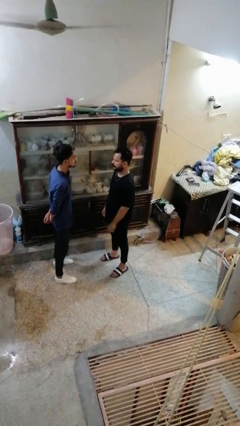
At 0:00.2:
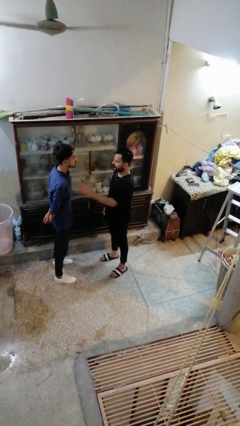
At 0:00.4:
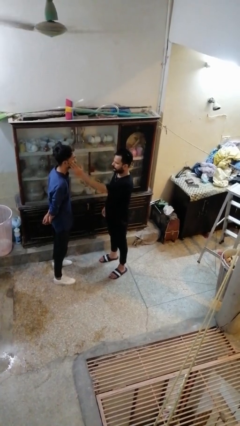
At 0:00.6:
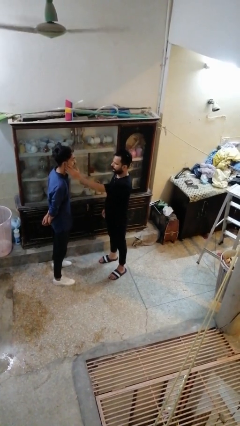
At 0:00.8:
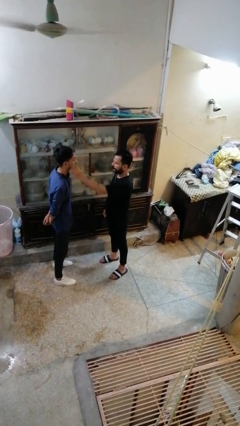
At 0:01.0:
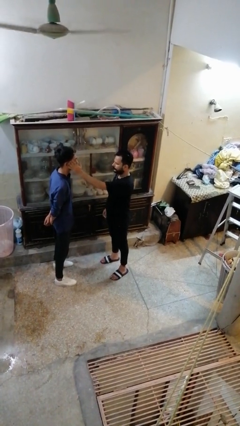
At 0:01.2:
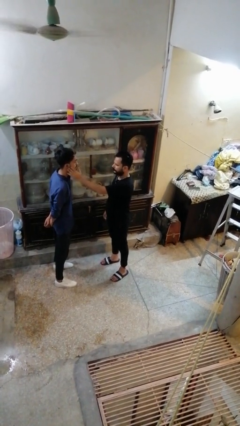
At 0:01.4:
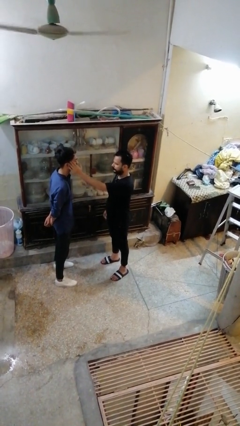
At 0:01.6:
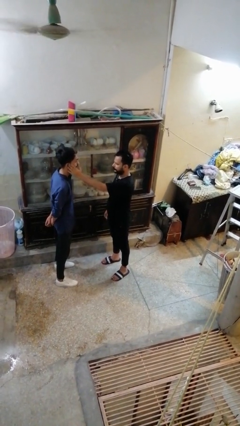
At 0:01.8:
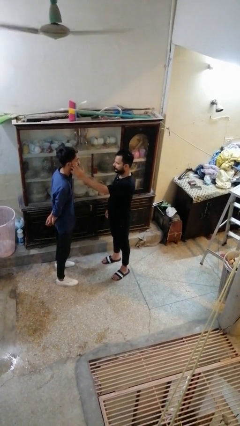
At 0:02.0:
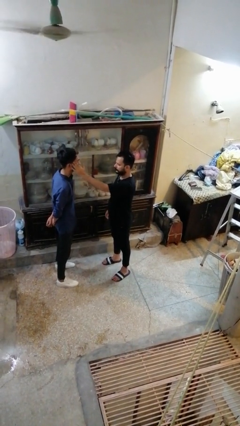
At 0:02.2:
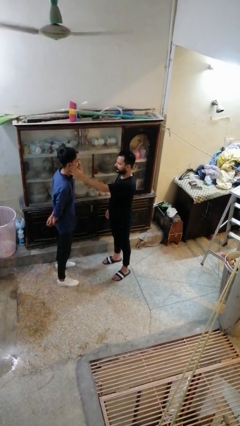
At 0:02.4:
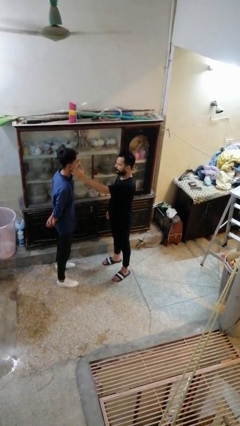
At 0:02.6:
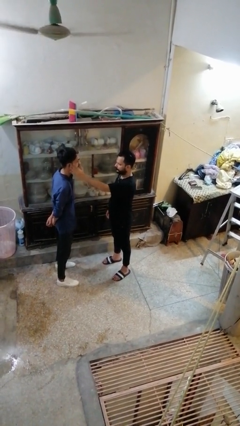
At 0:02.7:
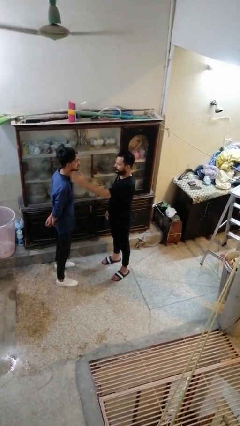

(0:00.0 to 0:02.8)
person touches face of person

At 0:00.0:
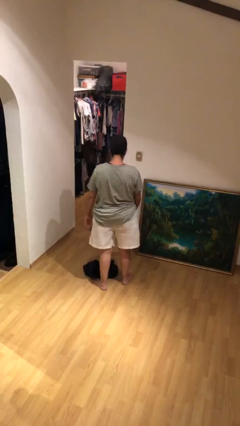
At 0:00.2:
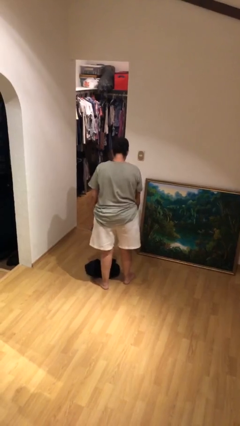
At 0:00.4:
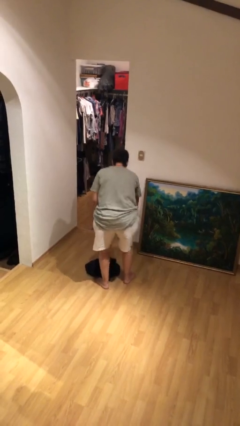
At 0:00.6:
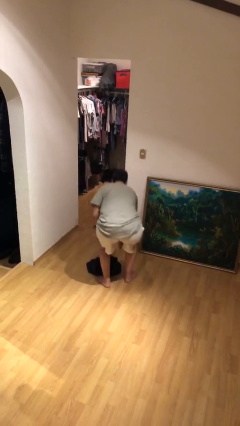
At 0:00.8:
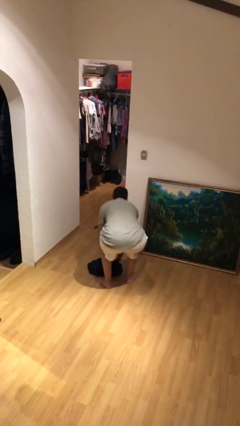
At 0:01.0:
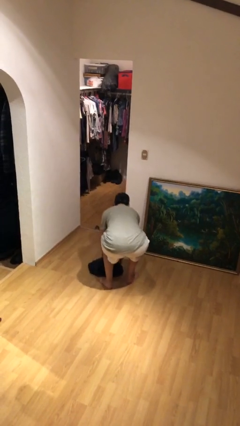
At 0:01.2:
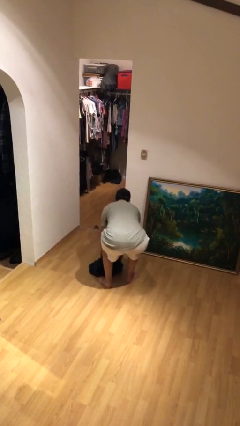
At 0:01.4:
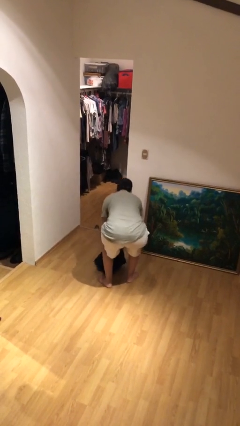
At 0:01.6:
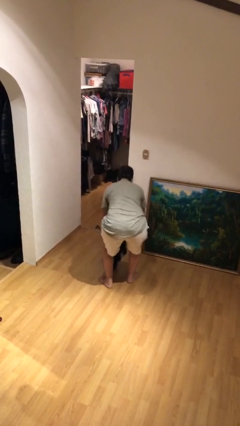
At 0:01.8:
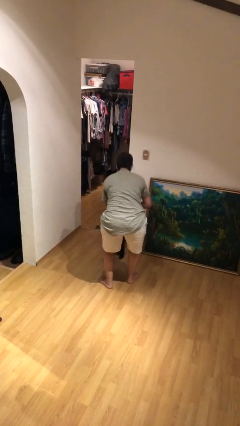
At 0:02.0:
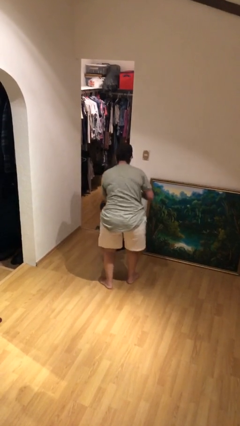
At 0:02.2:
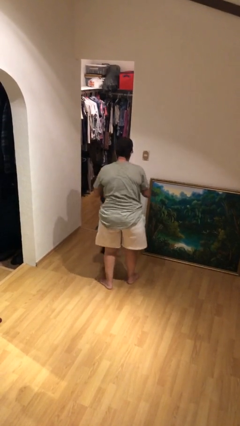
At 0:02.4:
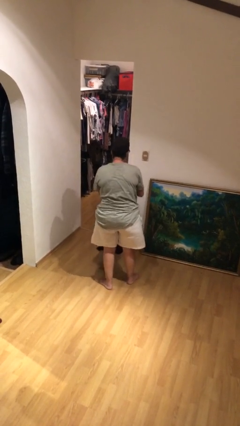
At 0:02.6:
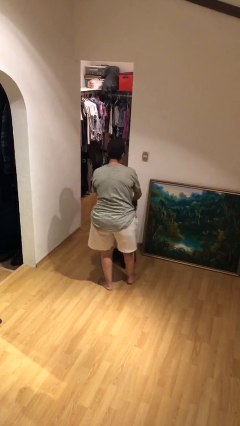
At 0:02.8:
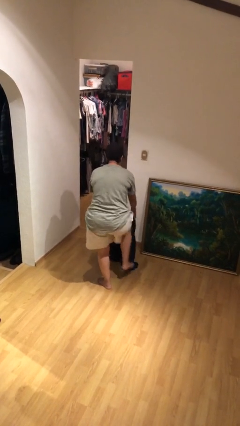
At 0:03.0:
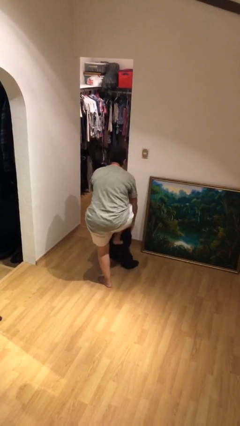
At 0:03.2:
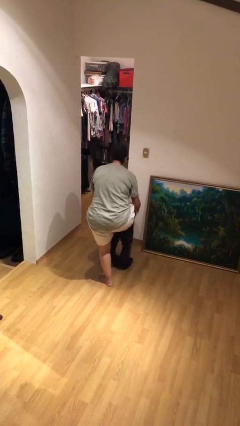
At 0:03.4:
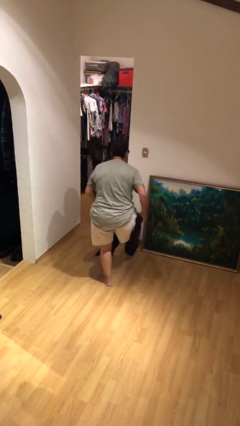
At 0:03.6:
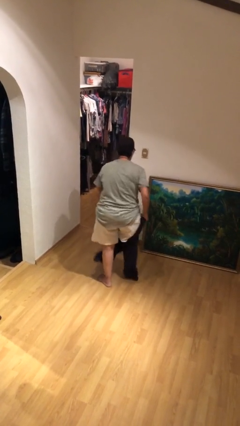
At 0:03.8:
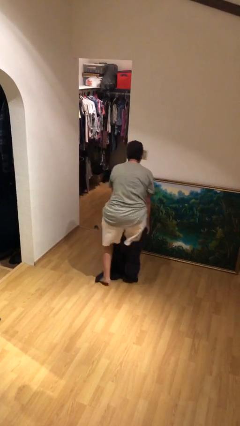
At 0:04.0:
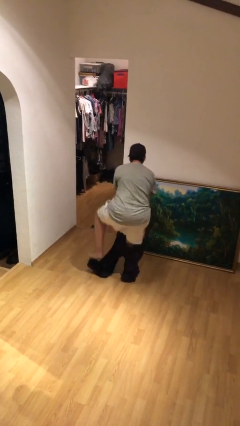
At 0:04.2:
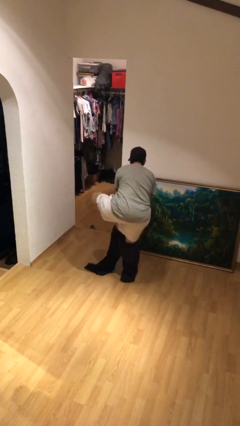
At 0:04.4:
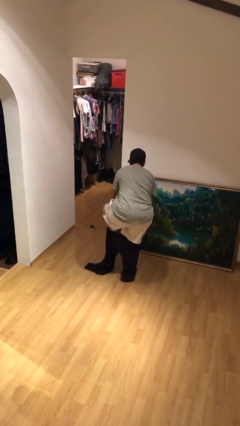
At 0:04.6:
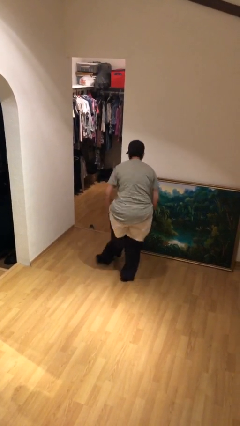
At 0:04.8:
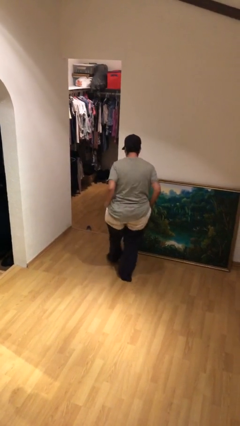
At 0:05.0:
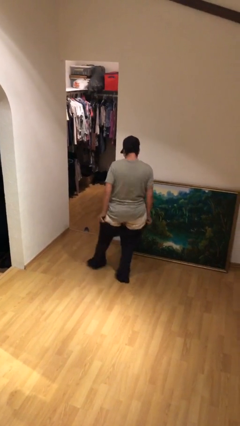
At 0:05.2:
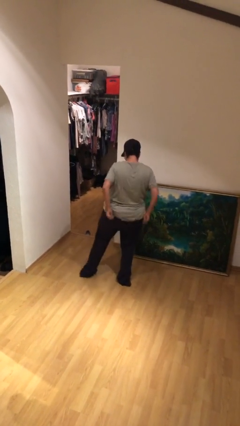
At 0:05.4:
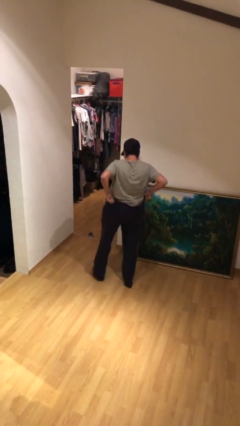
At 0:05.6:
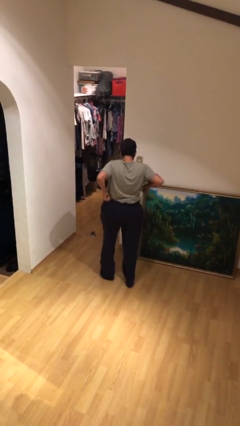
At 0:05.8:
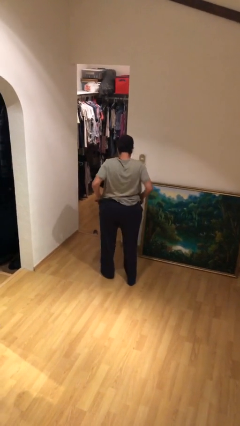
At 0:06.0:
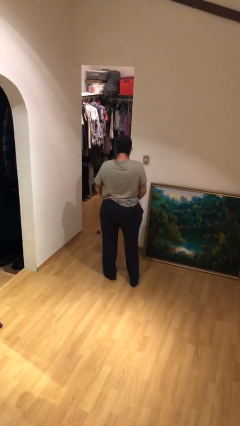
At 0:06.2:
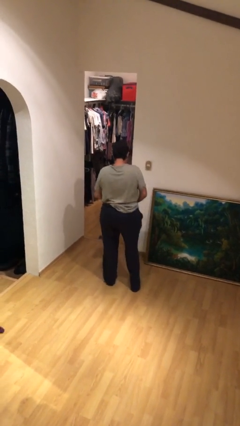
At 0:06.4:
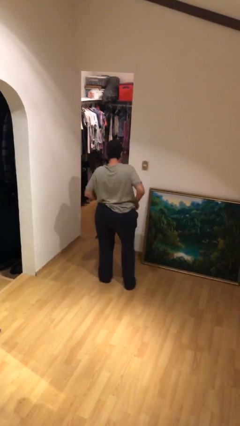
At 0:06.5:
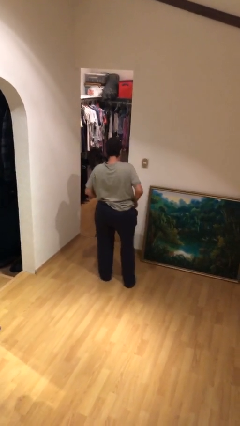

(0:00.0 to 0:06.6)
person puts on pants

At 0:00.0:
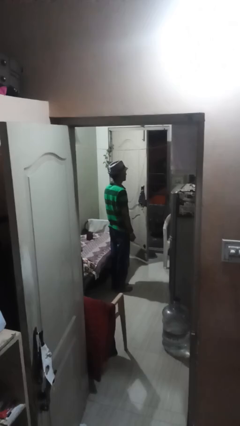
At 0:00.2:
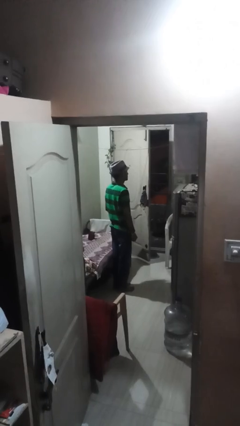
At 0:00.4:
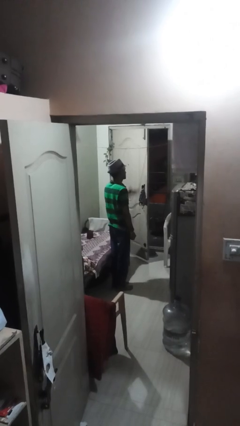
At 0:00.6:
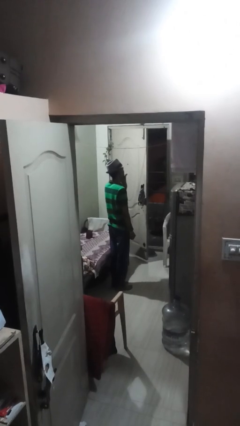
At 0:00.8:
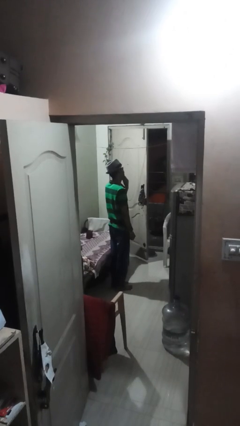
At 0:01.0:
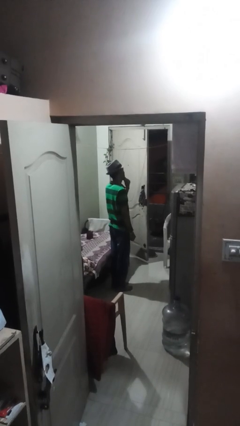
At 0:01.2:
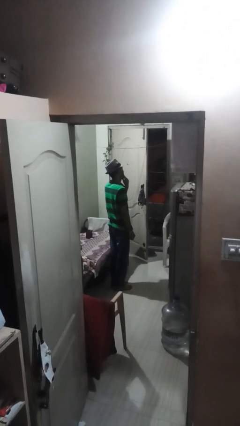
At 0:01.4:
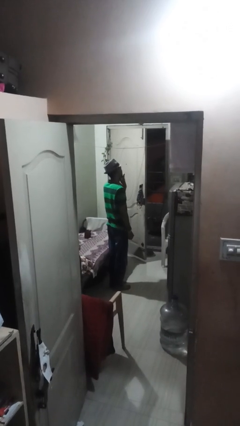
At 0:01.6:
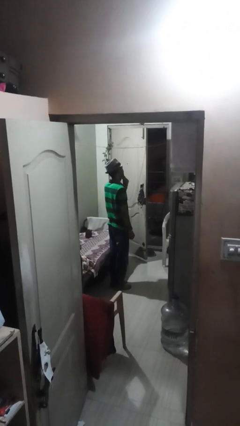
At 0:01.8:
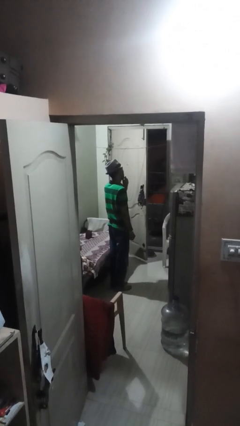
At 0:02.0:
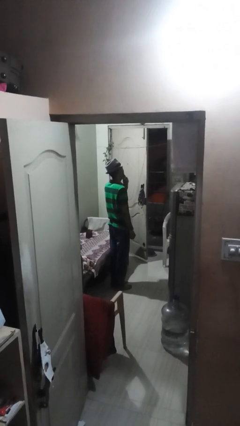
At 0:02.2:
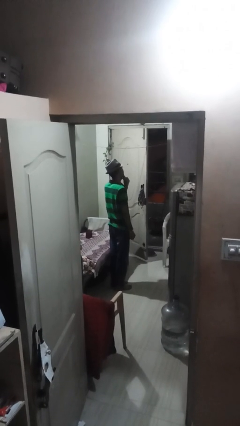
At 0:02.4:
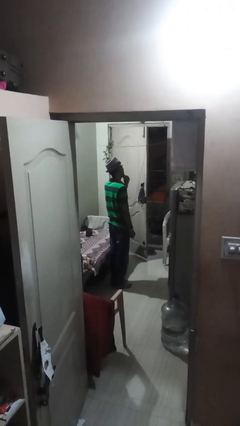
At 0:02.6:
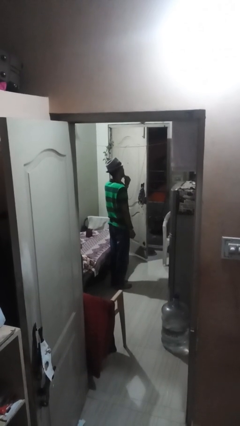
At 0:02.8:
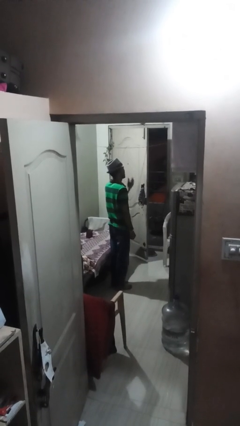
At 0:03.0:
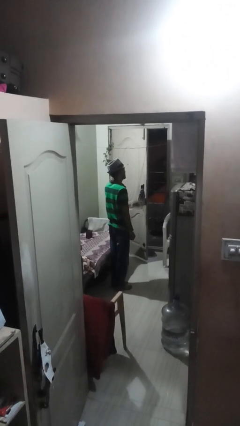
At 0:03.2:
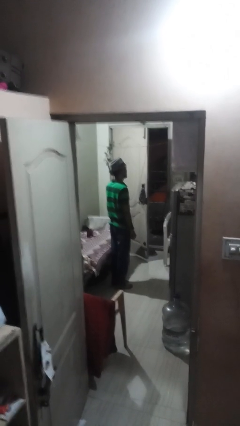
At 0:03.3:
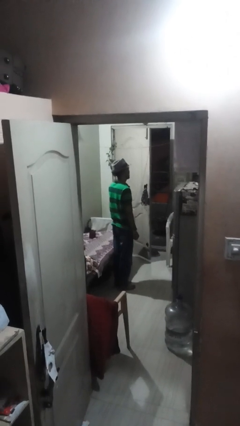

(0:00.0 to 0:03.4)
person strokes chin

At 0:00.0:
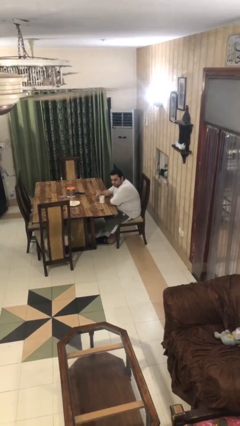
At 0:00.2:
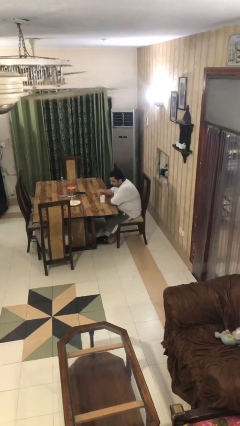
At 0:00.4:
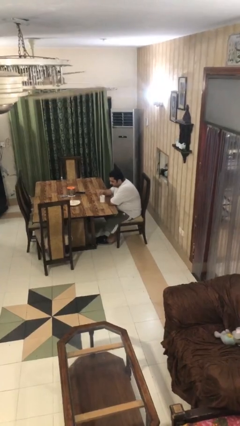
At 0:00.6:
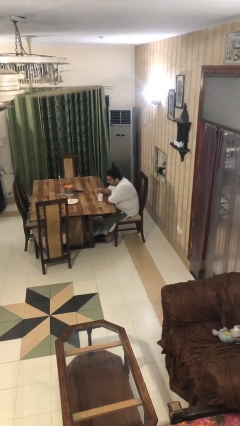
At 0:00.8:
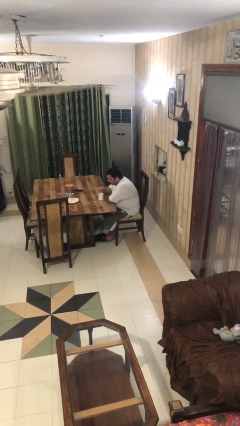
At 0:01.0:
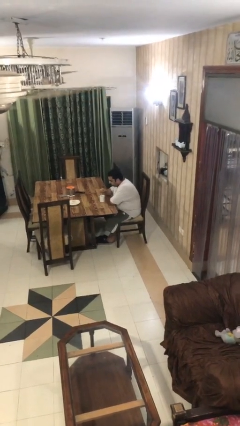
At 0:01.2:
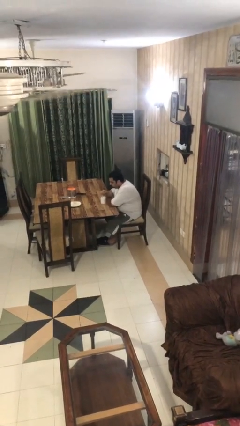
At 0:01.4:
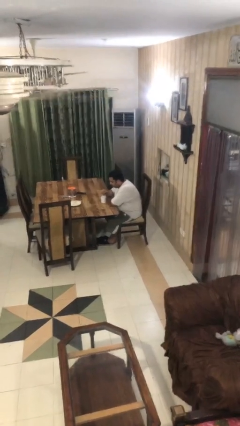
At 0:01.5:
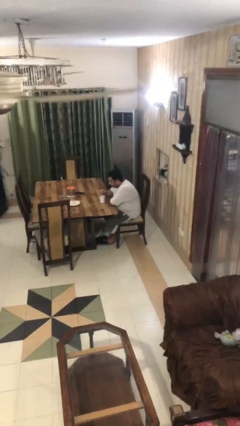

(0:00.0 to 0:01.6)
person stirs mug

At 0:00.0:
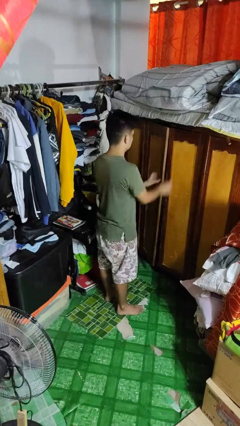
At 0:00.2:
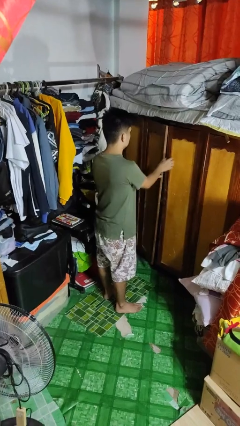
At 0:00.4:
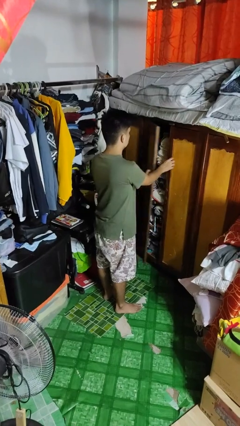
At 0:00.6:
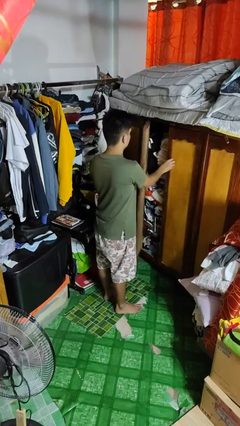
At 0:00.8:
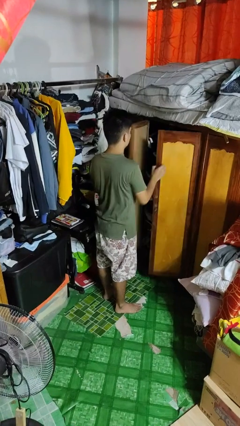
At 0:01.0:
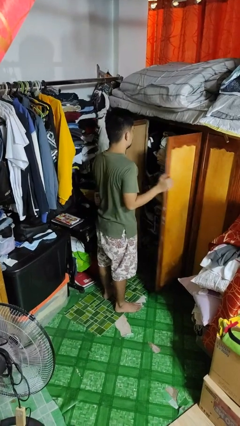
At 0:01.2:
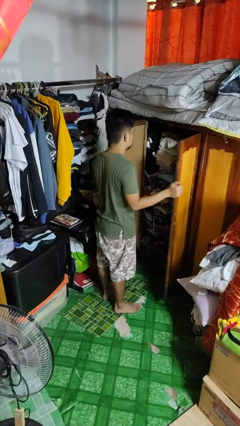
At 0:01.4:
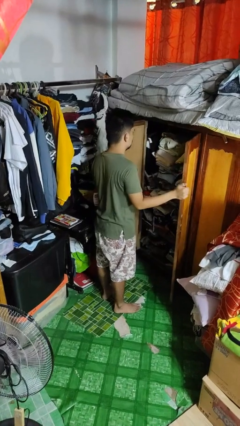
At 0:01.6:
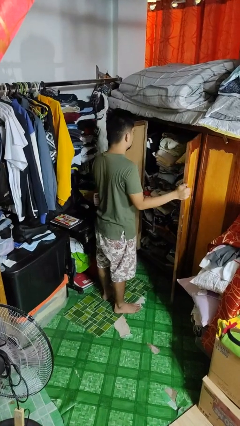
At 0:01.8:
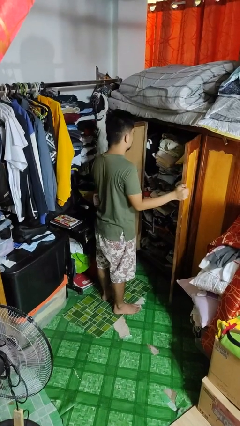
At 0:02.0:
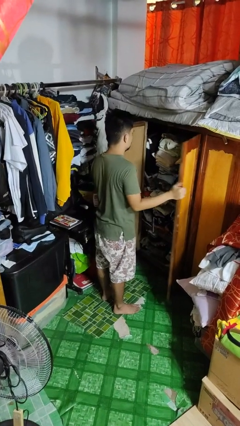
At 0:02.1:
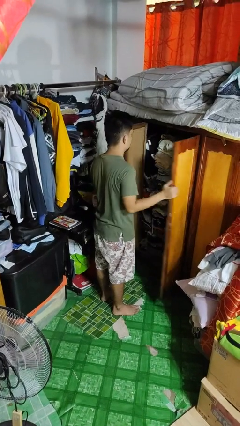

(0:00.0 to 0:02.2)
person opens closet door

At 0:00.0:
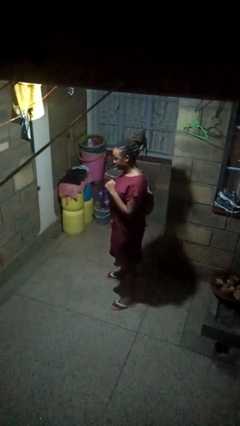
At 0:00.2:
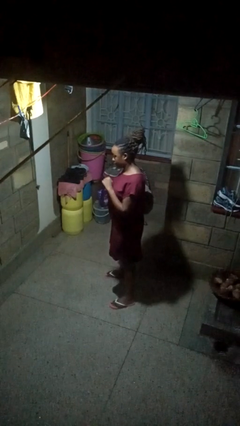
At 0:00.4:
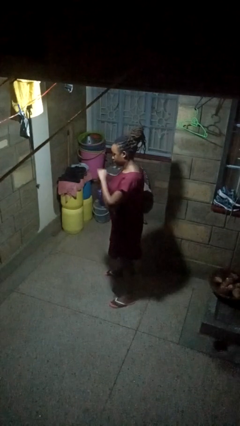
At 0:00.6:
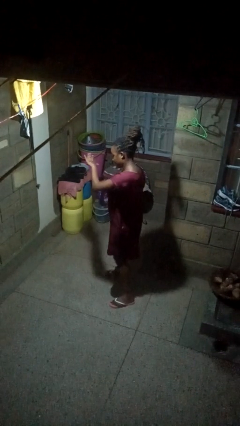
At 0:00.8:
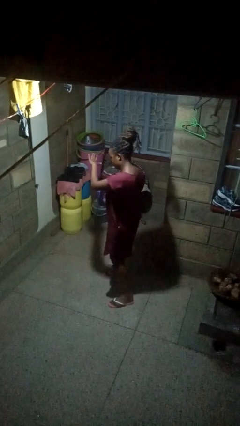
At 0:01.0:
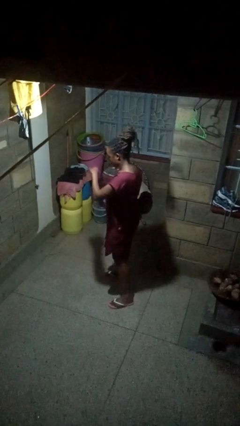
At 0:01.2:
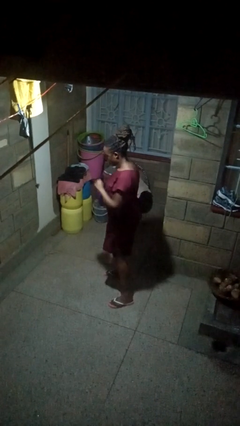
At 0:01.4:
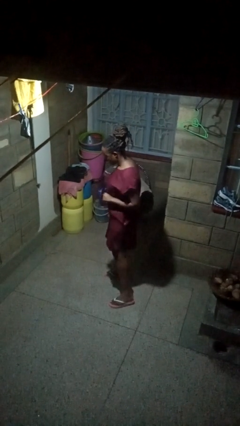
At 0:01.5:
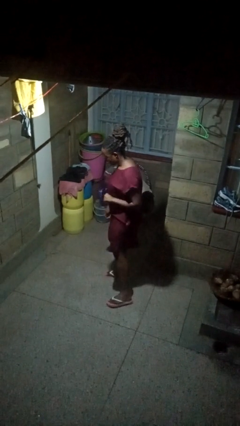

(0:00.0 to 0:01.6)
person karate chop
